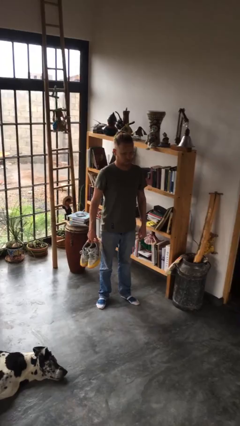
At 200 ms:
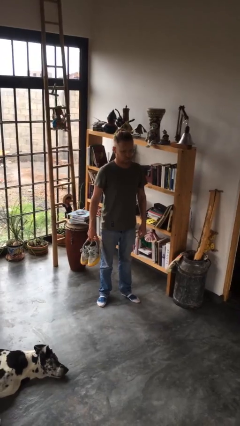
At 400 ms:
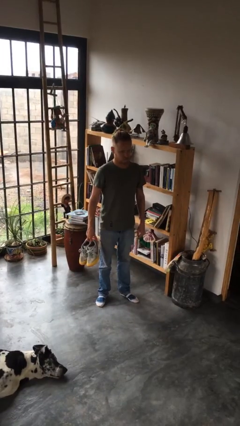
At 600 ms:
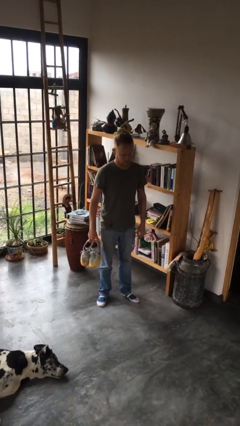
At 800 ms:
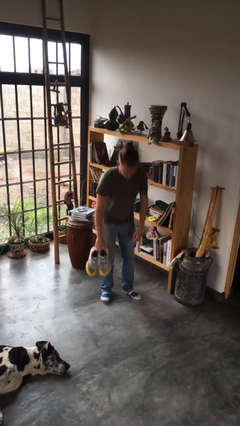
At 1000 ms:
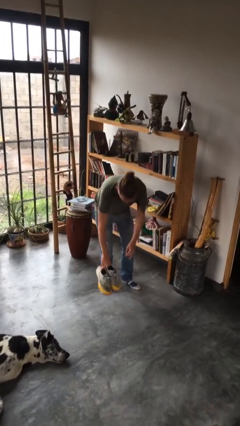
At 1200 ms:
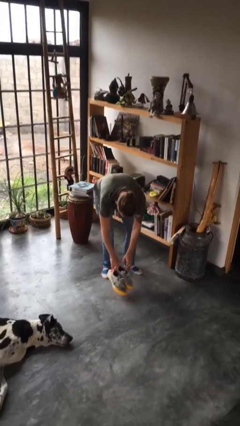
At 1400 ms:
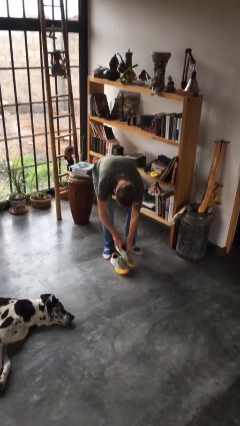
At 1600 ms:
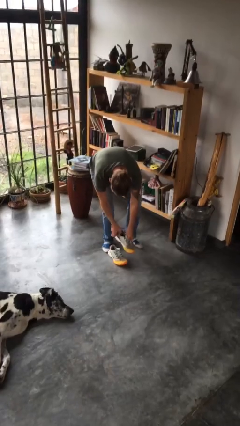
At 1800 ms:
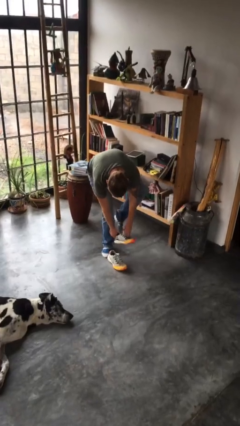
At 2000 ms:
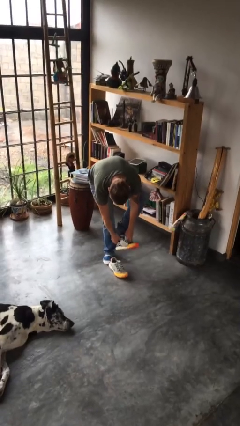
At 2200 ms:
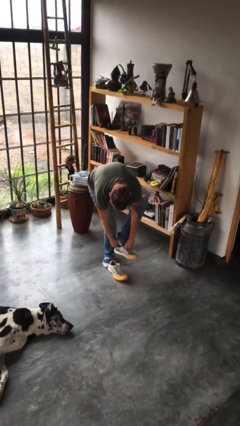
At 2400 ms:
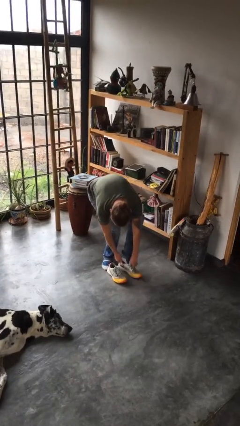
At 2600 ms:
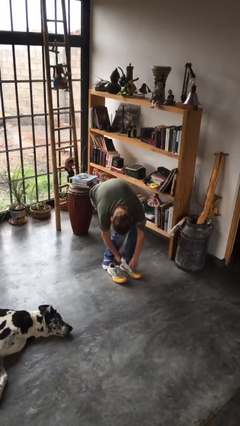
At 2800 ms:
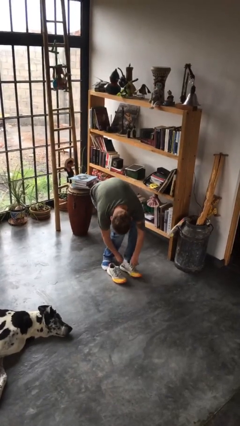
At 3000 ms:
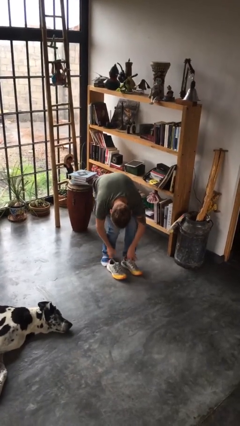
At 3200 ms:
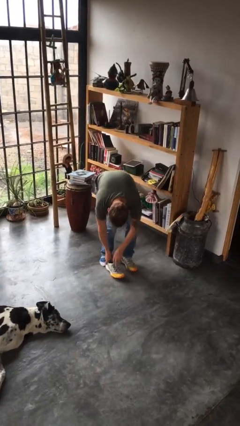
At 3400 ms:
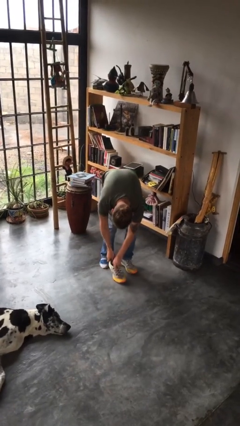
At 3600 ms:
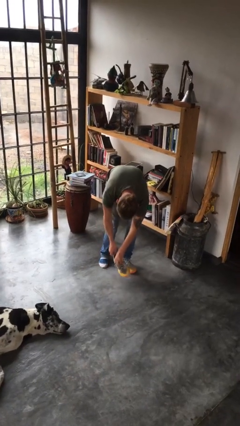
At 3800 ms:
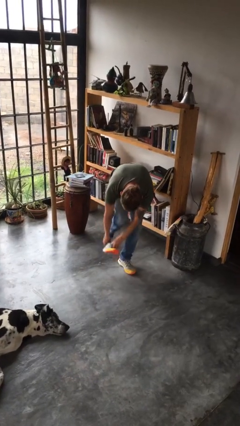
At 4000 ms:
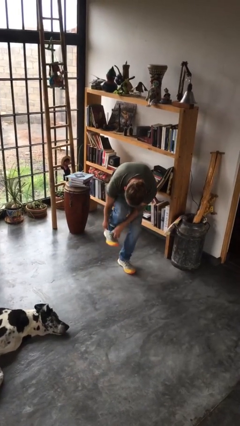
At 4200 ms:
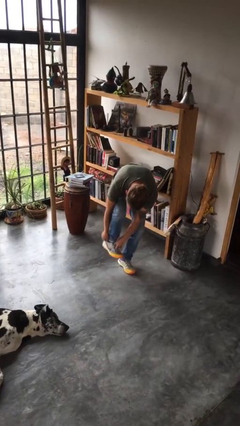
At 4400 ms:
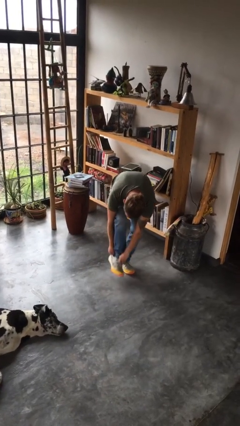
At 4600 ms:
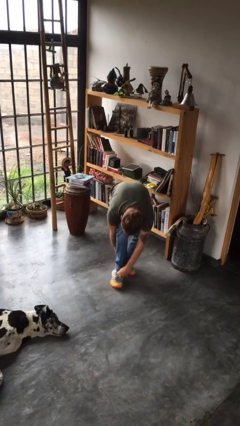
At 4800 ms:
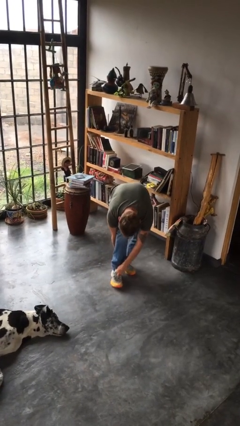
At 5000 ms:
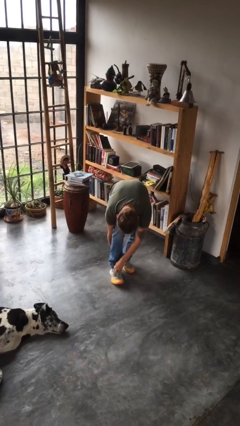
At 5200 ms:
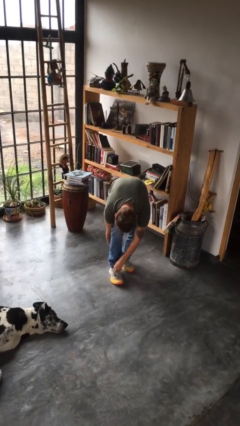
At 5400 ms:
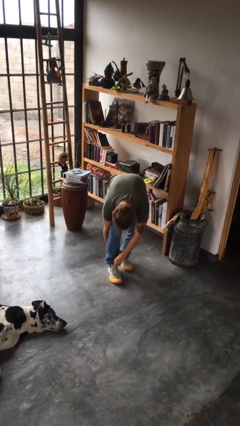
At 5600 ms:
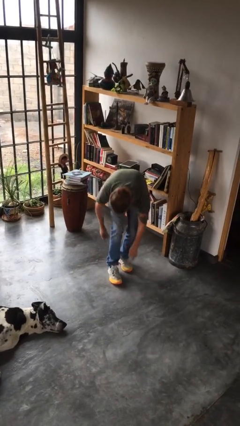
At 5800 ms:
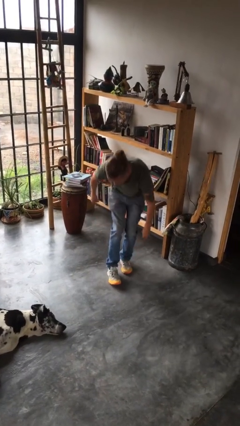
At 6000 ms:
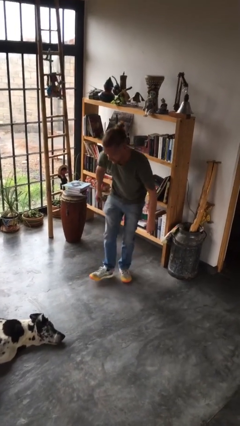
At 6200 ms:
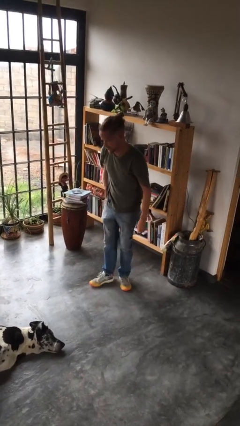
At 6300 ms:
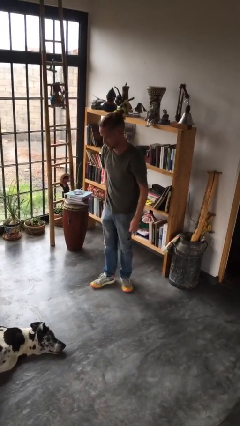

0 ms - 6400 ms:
person puts on shoes

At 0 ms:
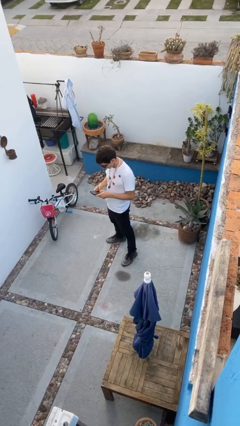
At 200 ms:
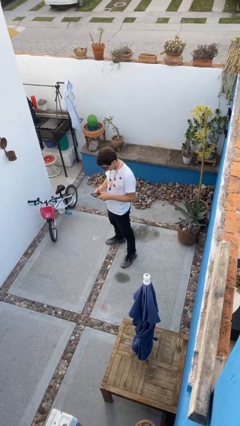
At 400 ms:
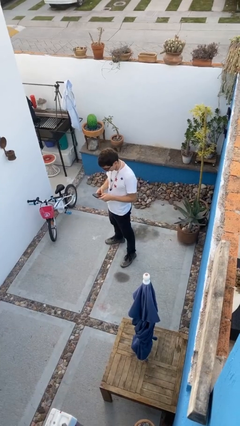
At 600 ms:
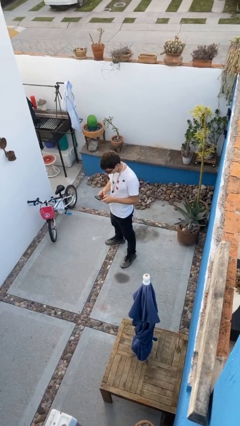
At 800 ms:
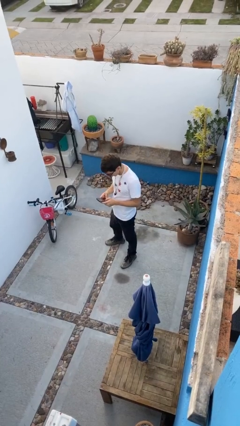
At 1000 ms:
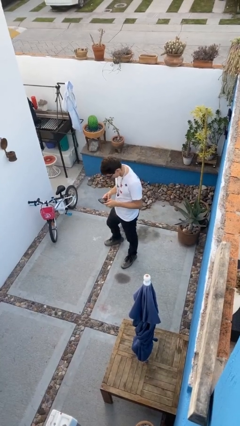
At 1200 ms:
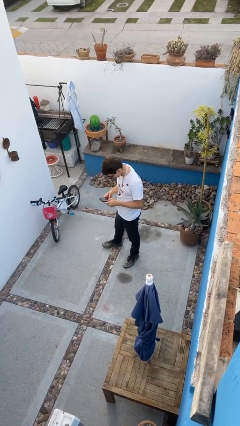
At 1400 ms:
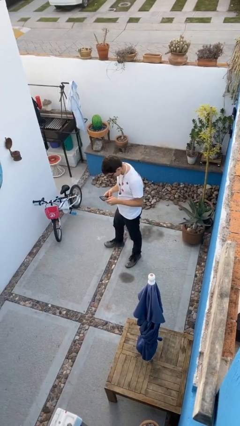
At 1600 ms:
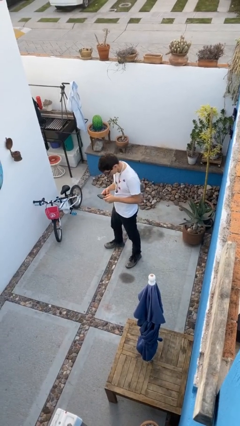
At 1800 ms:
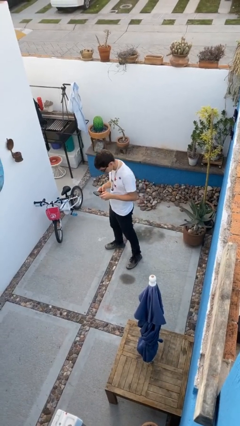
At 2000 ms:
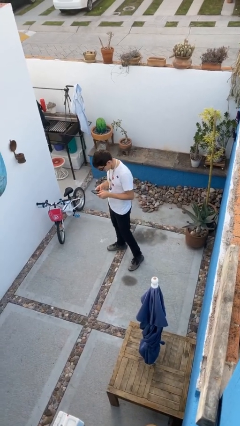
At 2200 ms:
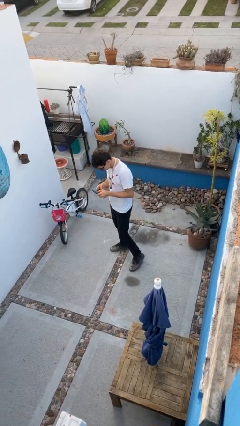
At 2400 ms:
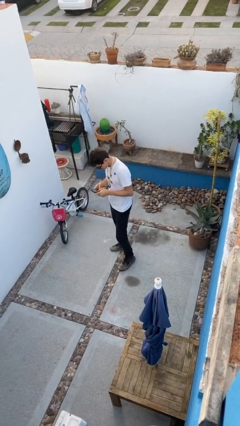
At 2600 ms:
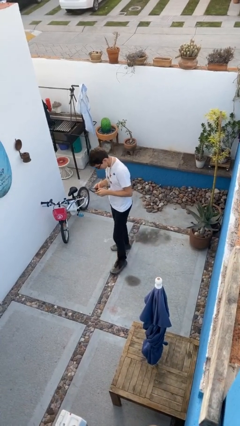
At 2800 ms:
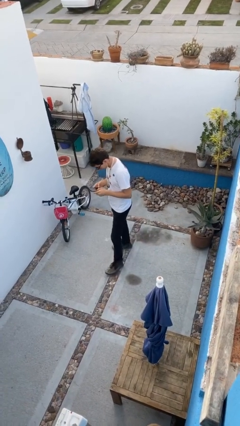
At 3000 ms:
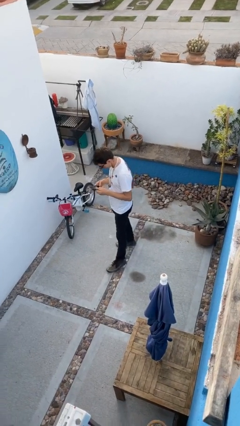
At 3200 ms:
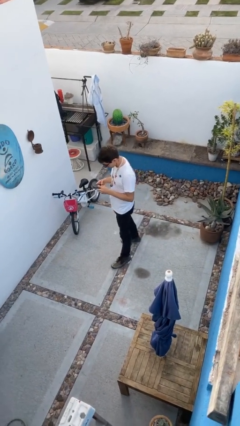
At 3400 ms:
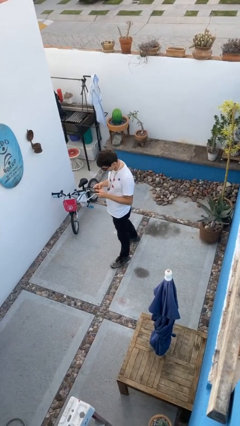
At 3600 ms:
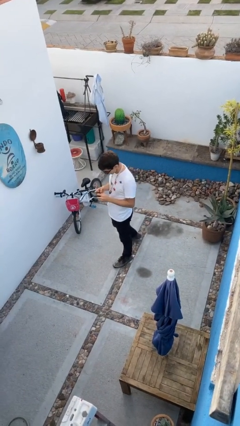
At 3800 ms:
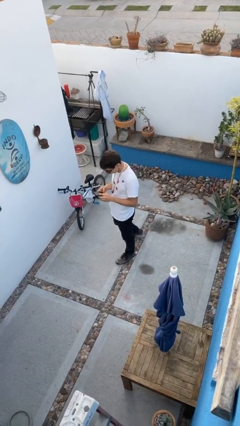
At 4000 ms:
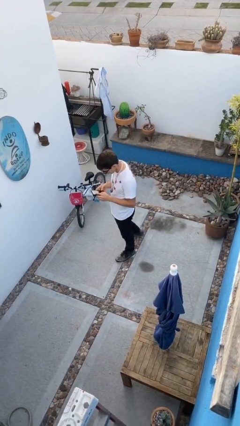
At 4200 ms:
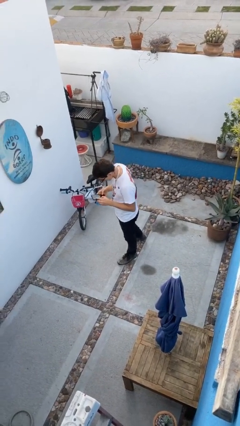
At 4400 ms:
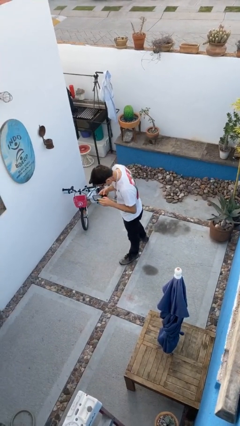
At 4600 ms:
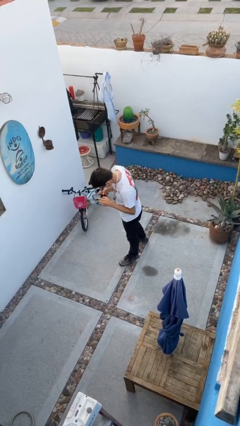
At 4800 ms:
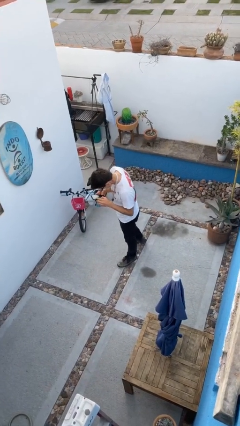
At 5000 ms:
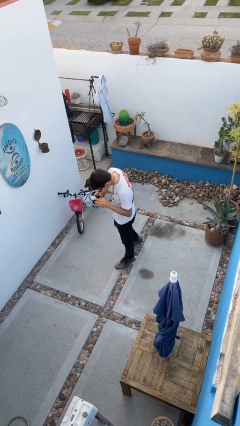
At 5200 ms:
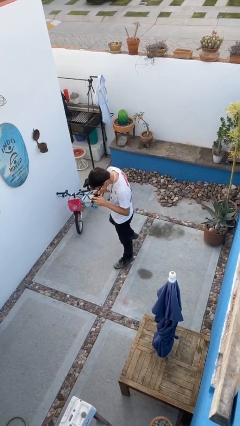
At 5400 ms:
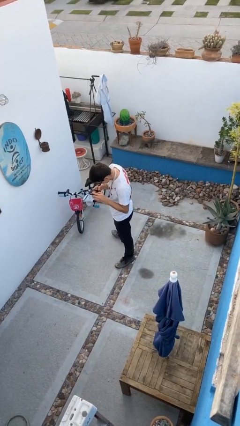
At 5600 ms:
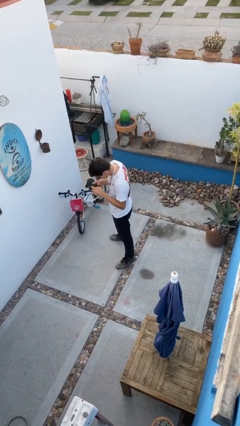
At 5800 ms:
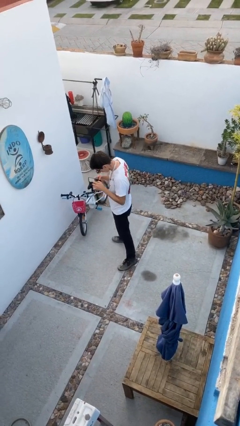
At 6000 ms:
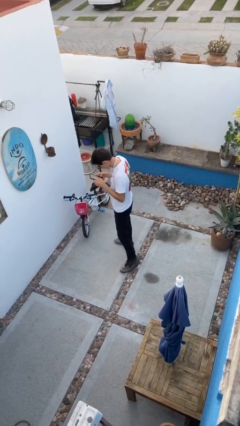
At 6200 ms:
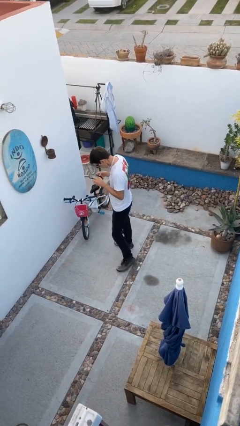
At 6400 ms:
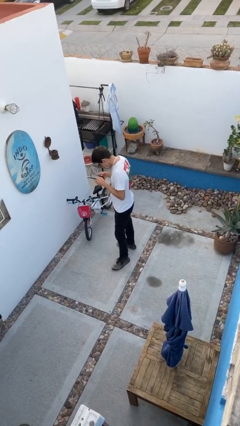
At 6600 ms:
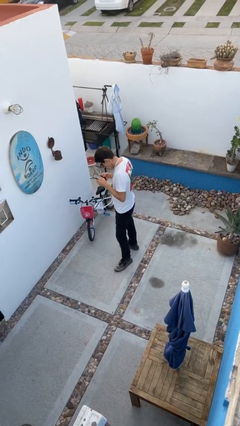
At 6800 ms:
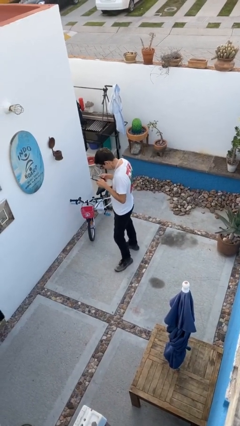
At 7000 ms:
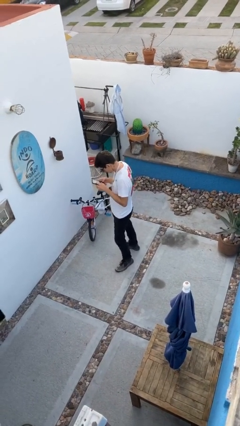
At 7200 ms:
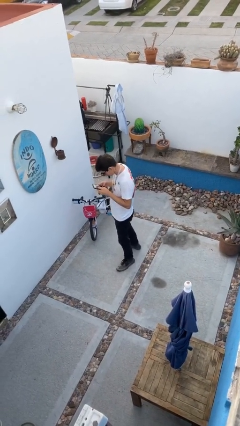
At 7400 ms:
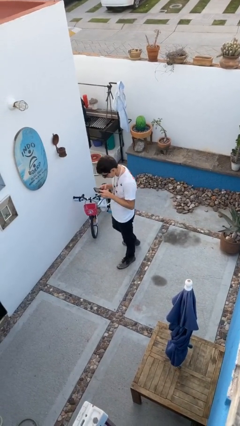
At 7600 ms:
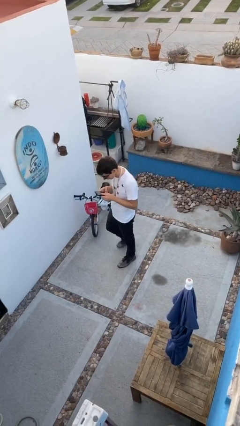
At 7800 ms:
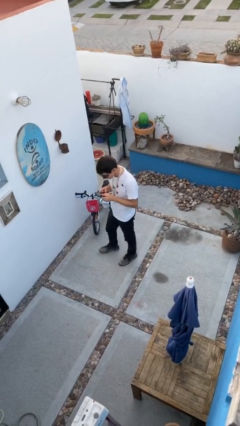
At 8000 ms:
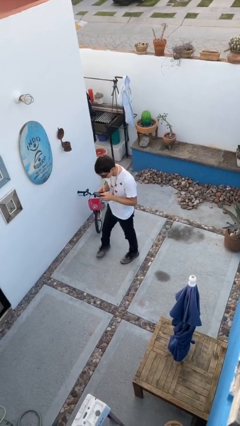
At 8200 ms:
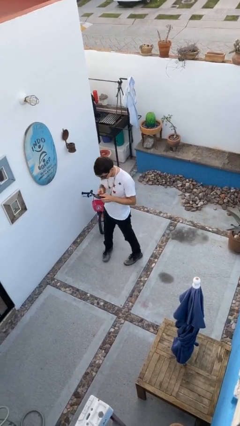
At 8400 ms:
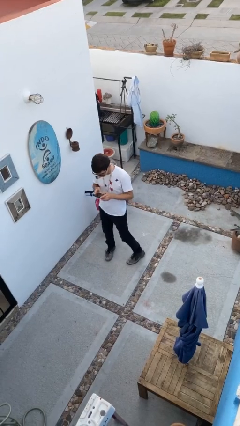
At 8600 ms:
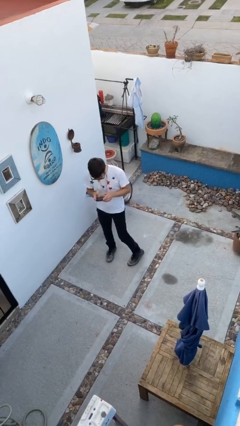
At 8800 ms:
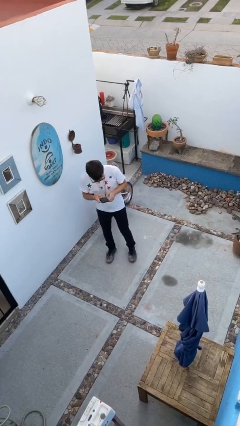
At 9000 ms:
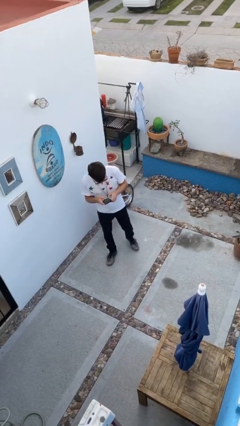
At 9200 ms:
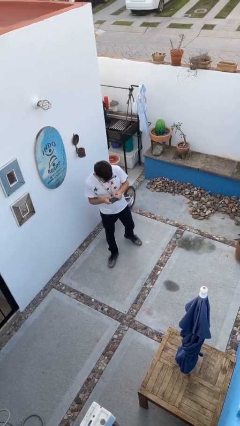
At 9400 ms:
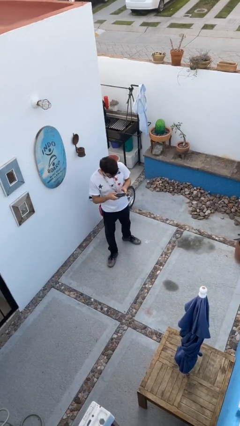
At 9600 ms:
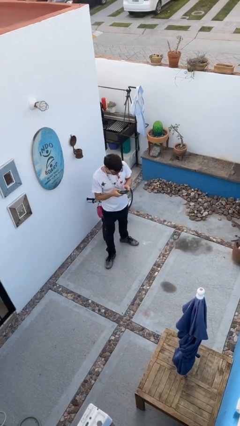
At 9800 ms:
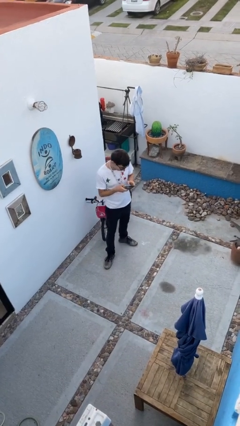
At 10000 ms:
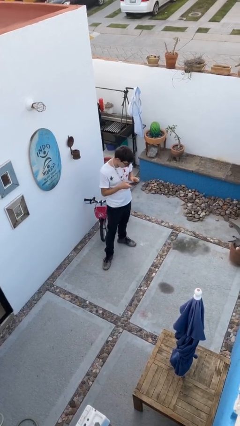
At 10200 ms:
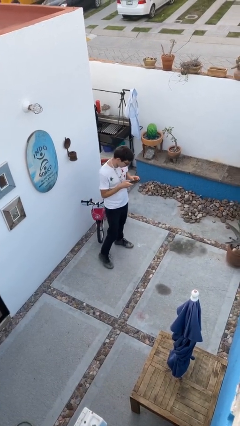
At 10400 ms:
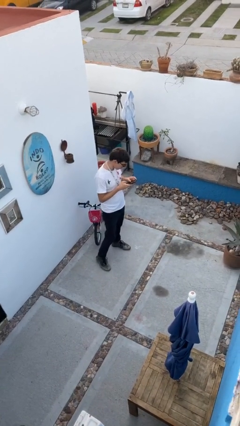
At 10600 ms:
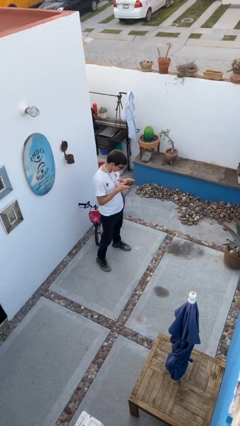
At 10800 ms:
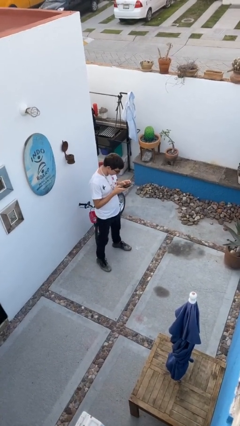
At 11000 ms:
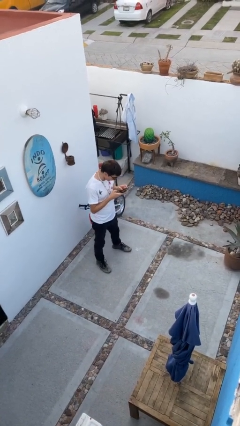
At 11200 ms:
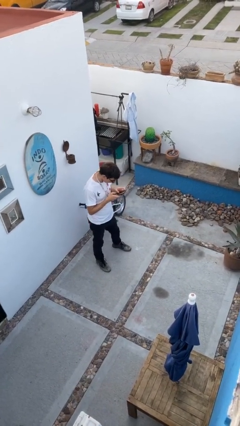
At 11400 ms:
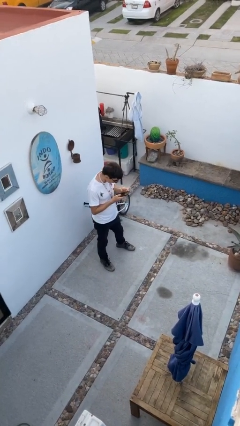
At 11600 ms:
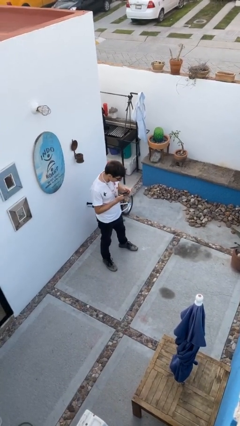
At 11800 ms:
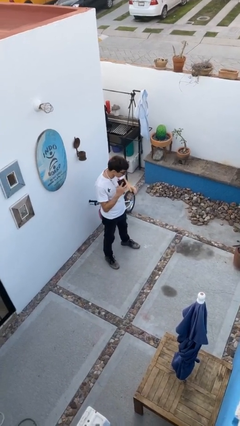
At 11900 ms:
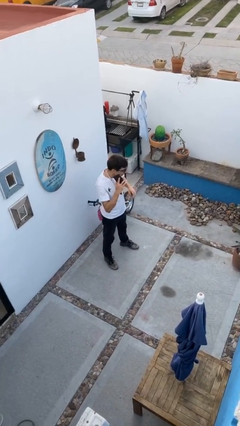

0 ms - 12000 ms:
person texts on phone
